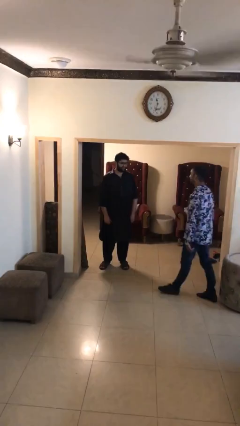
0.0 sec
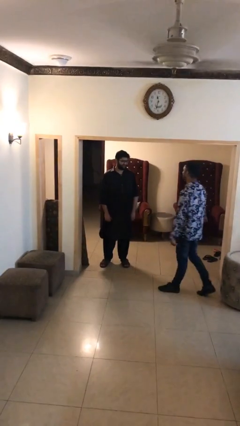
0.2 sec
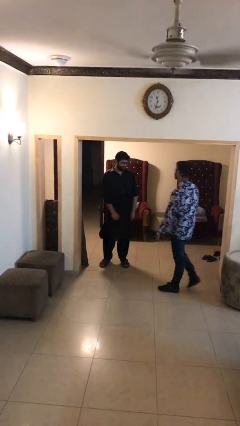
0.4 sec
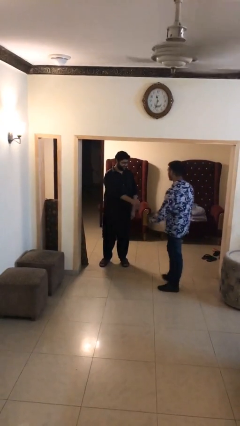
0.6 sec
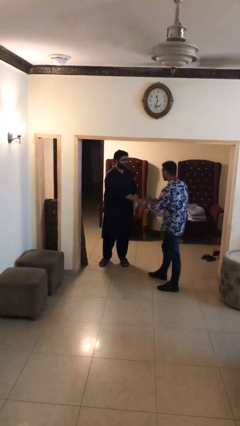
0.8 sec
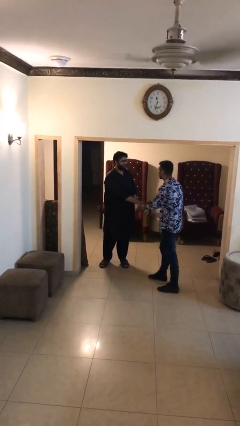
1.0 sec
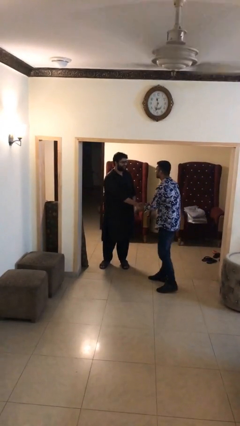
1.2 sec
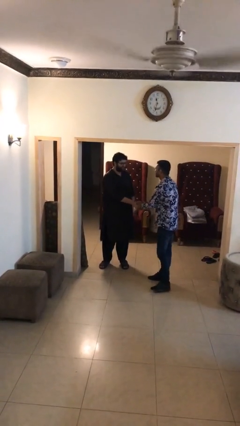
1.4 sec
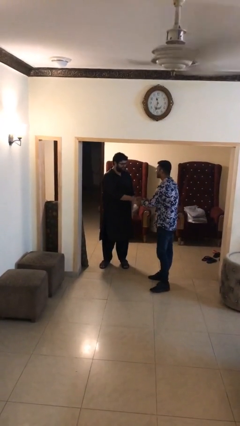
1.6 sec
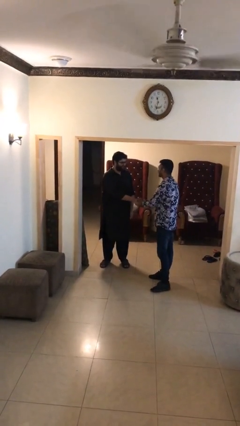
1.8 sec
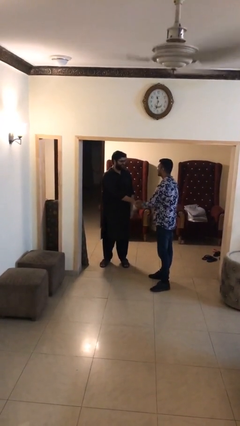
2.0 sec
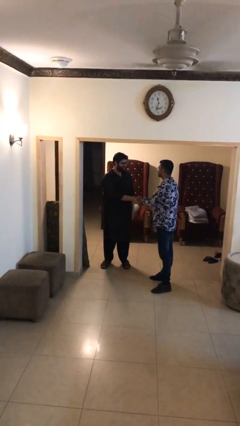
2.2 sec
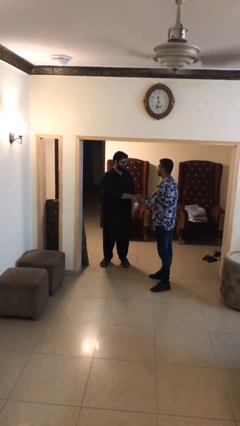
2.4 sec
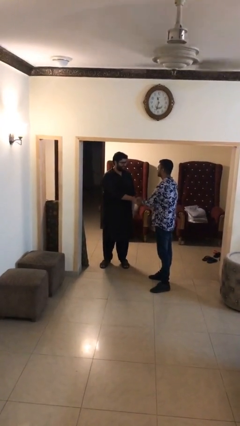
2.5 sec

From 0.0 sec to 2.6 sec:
person shakes hand

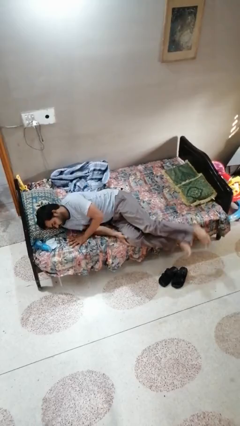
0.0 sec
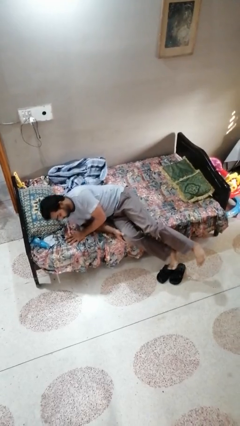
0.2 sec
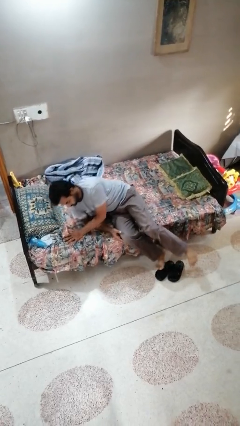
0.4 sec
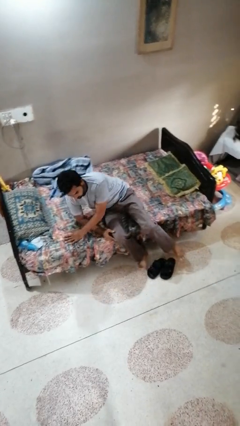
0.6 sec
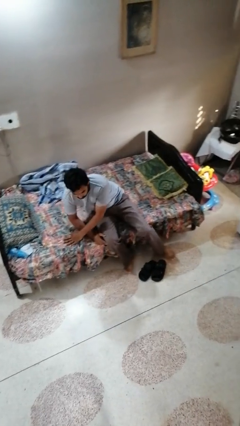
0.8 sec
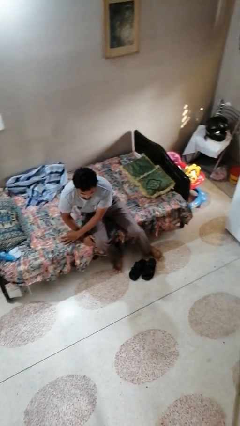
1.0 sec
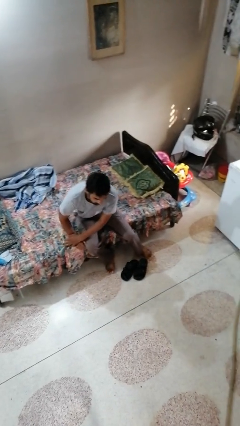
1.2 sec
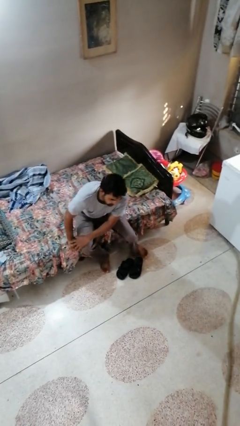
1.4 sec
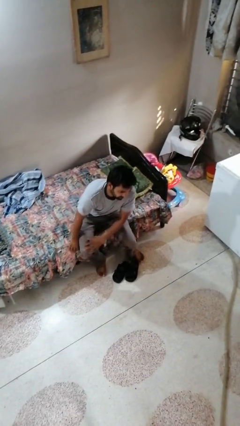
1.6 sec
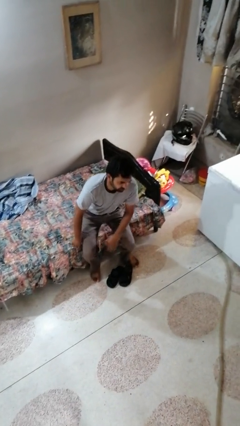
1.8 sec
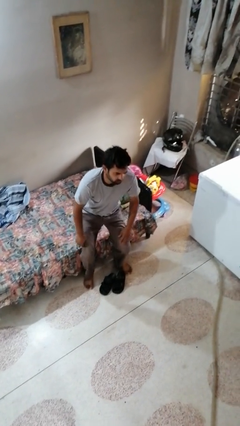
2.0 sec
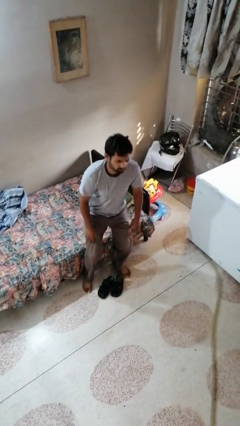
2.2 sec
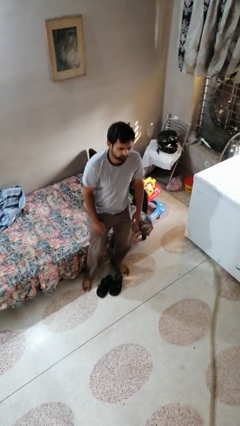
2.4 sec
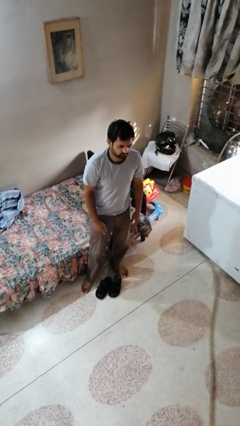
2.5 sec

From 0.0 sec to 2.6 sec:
person stands up

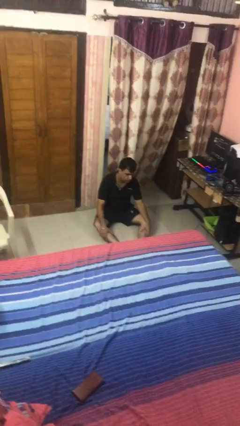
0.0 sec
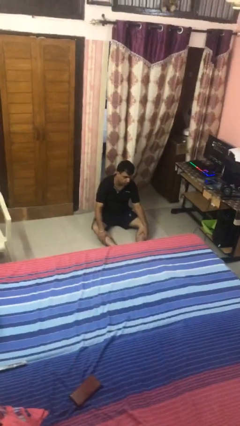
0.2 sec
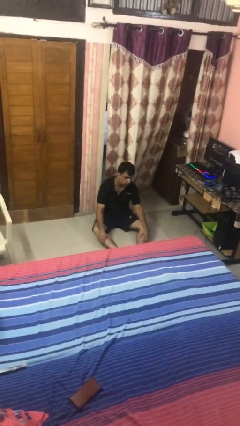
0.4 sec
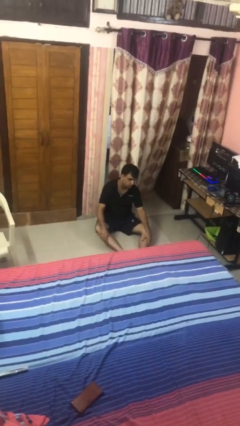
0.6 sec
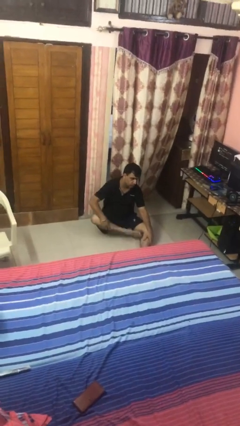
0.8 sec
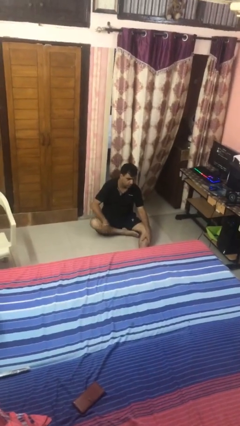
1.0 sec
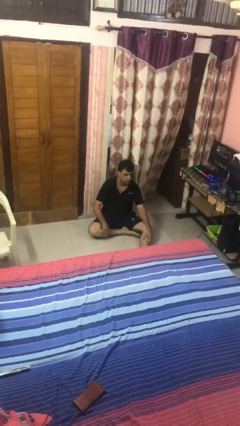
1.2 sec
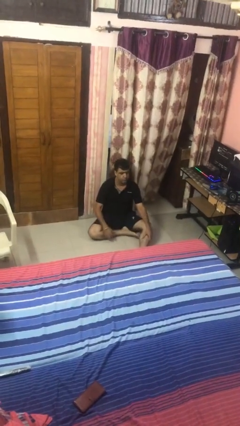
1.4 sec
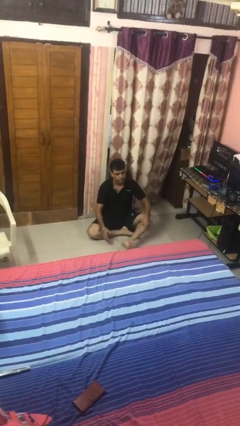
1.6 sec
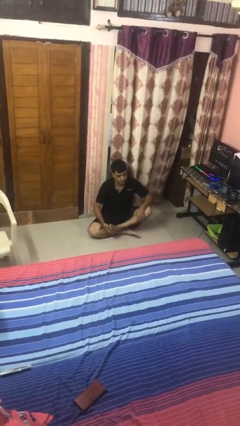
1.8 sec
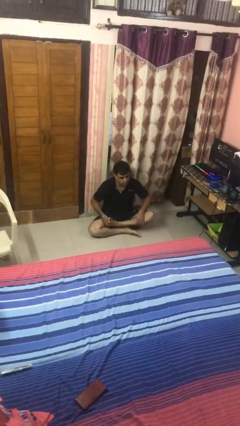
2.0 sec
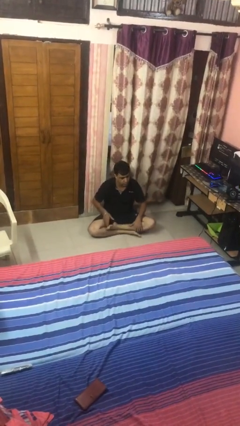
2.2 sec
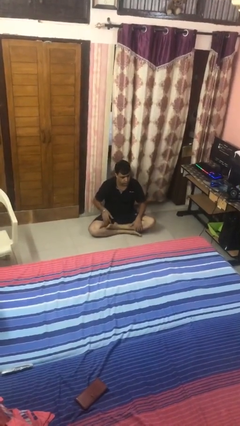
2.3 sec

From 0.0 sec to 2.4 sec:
person crosses legs

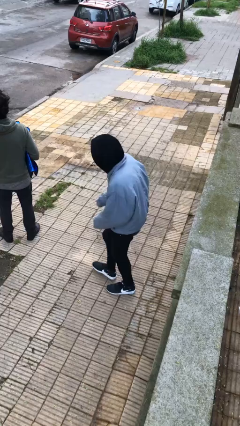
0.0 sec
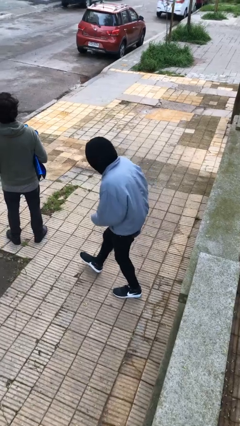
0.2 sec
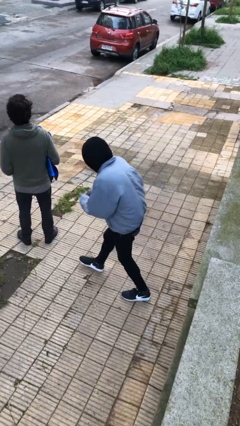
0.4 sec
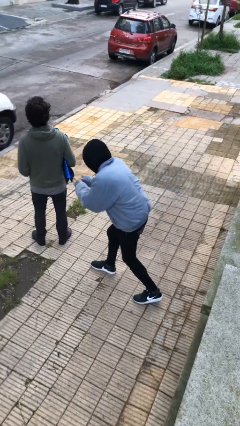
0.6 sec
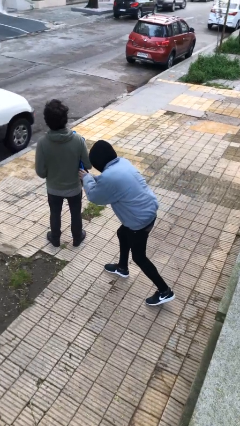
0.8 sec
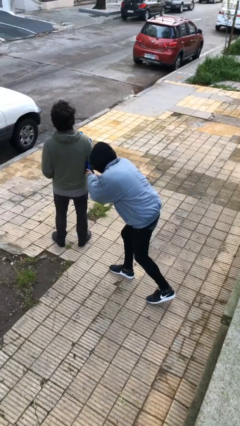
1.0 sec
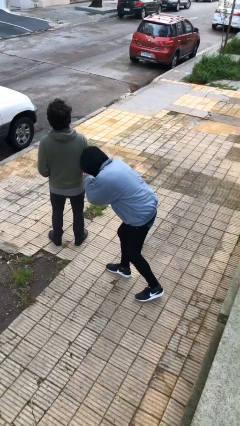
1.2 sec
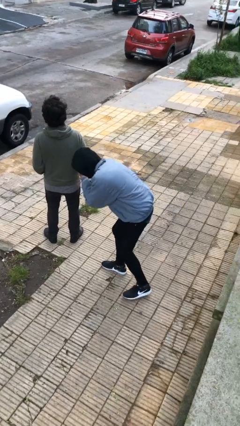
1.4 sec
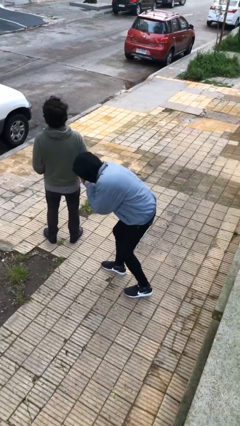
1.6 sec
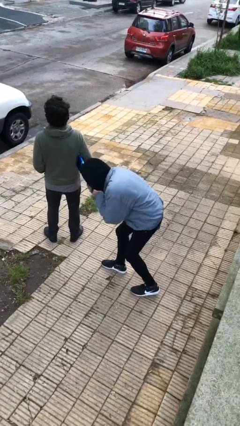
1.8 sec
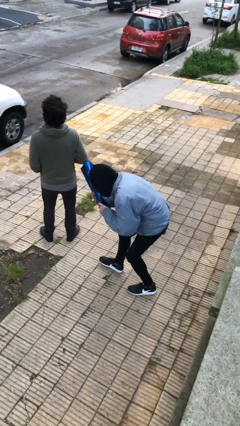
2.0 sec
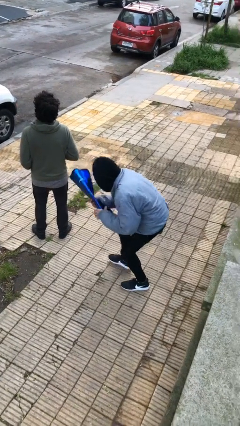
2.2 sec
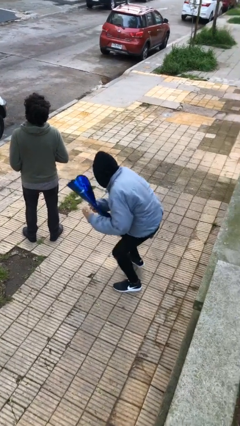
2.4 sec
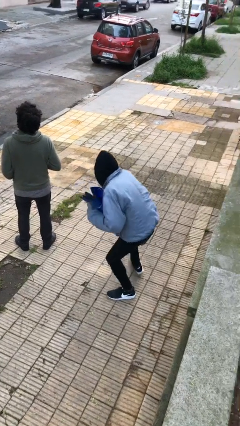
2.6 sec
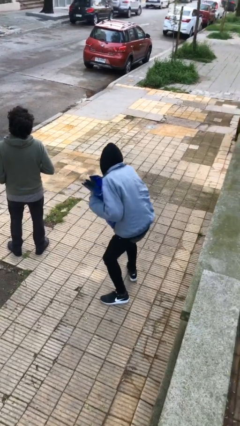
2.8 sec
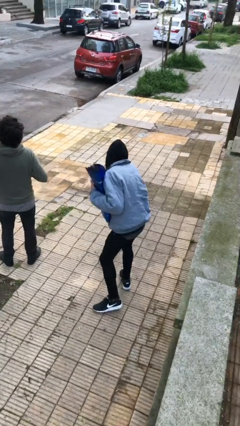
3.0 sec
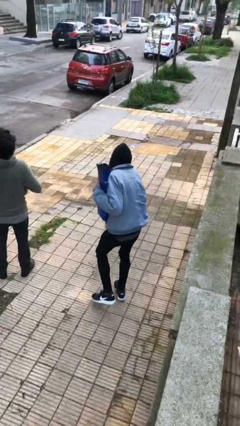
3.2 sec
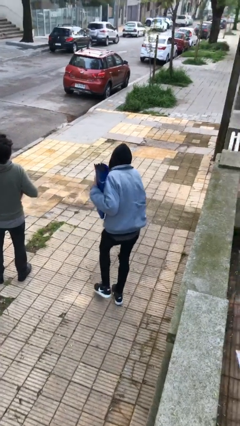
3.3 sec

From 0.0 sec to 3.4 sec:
person steals object from person

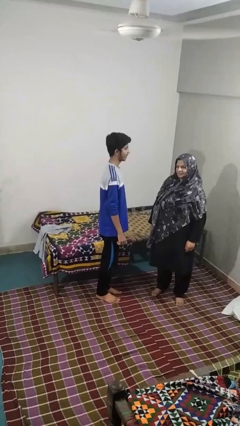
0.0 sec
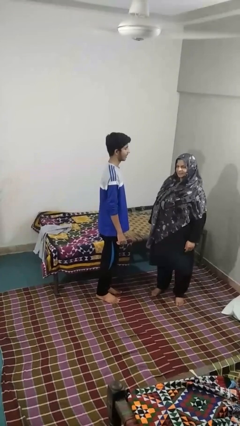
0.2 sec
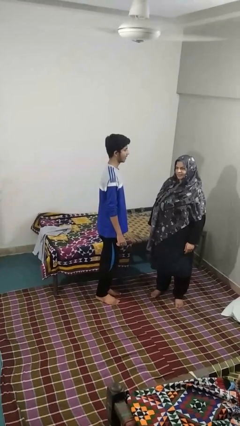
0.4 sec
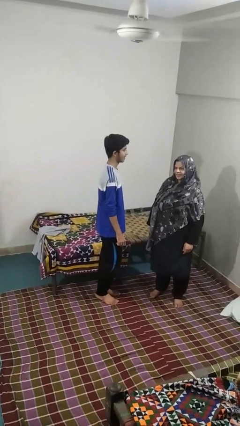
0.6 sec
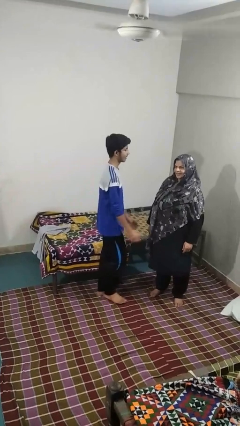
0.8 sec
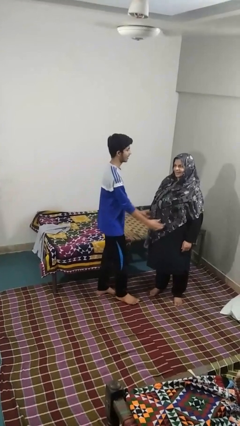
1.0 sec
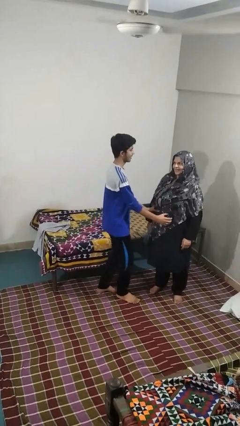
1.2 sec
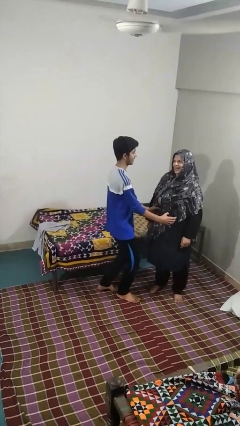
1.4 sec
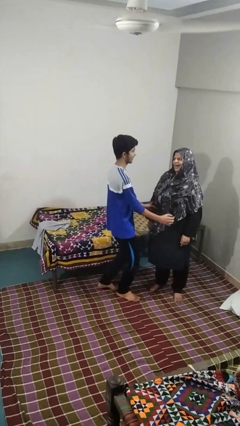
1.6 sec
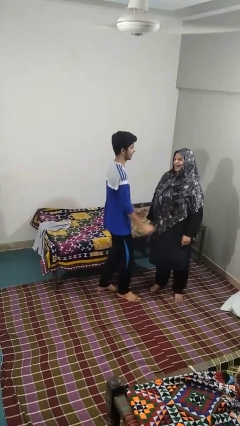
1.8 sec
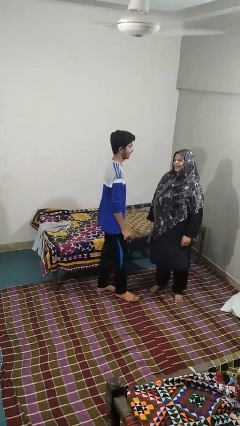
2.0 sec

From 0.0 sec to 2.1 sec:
person tickles person

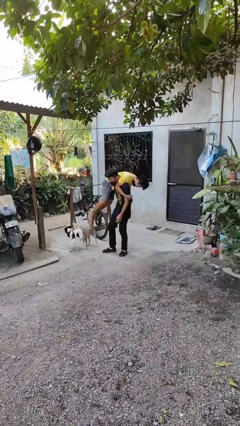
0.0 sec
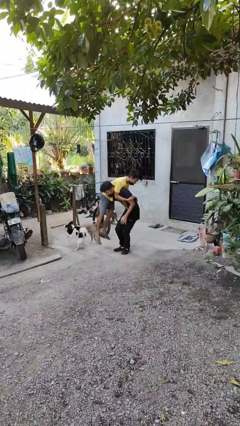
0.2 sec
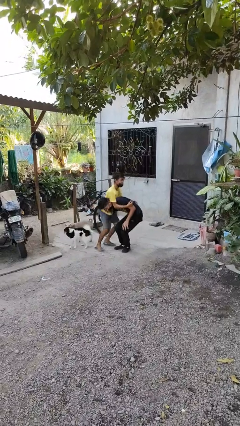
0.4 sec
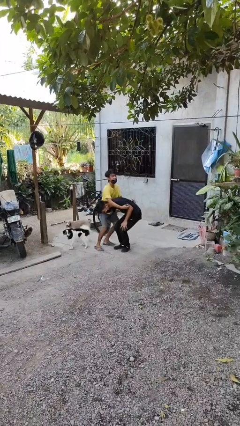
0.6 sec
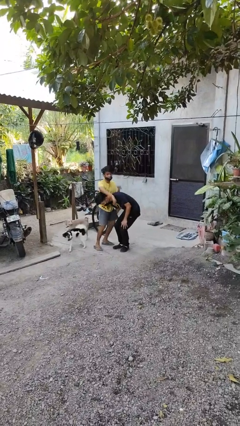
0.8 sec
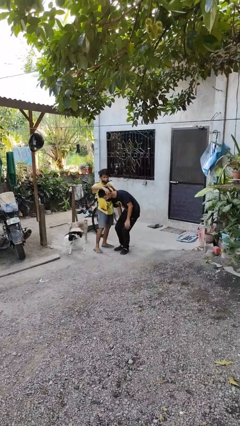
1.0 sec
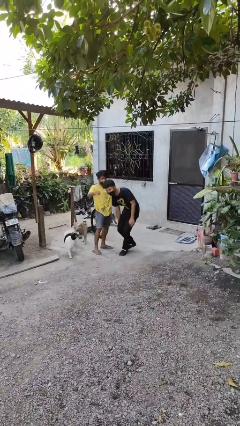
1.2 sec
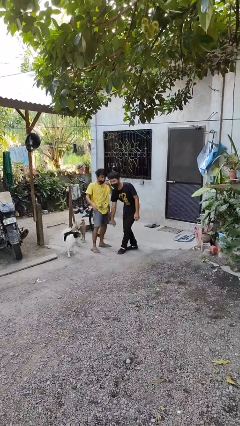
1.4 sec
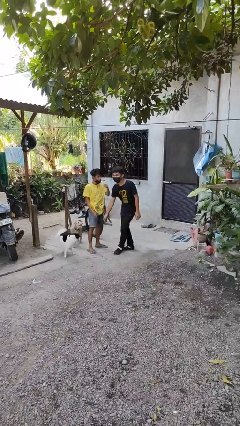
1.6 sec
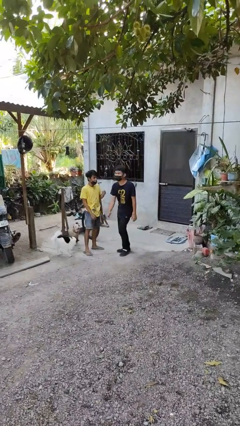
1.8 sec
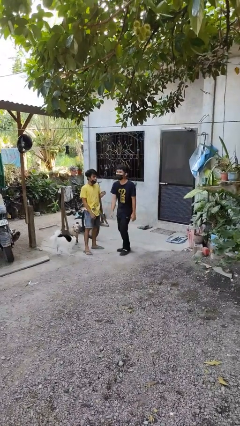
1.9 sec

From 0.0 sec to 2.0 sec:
person puts down person

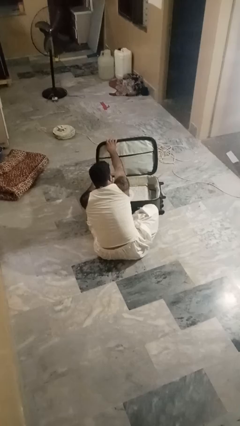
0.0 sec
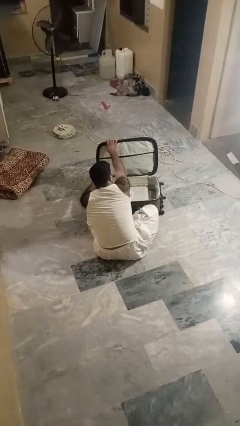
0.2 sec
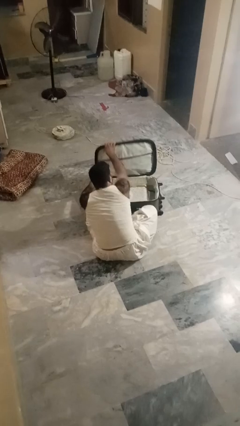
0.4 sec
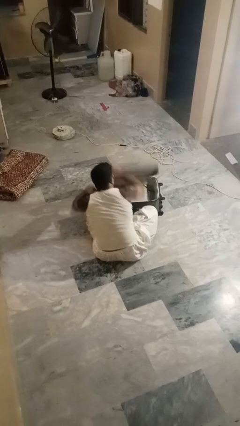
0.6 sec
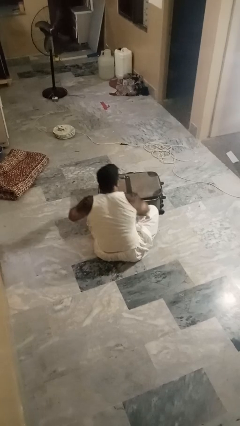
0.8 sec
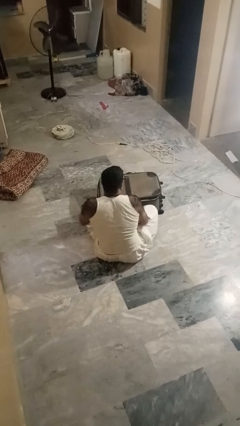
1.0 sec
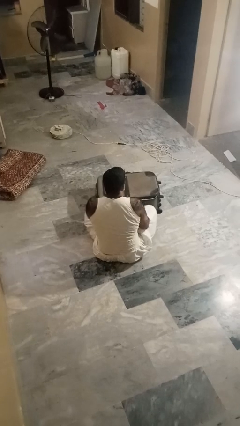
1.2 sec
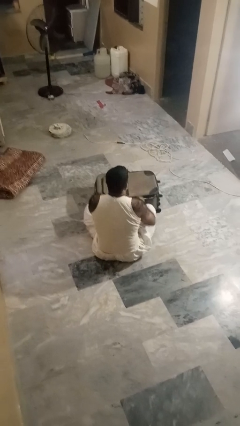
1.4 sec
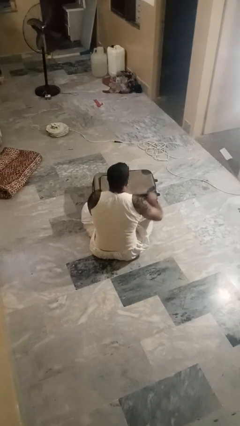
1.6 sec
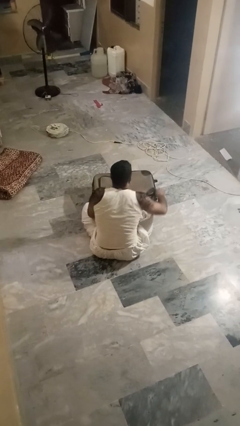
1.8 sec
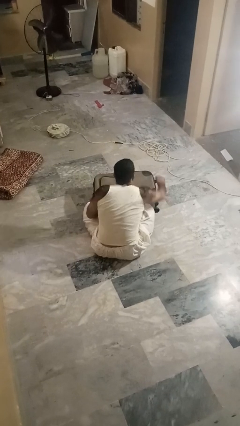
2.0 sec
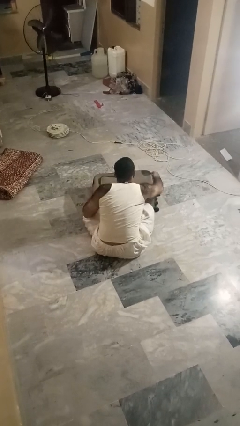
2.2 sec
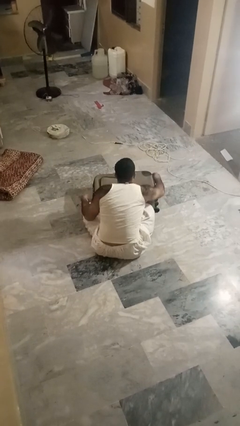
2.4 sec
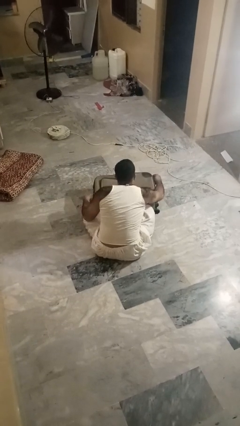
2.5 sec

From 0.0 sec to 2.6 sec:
person closes suitcase
